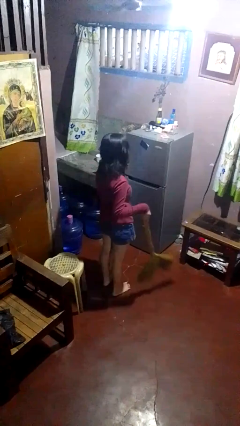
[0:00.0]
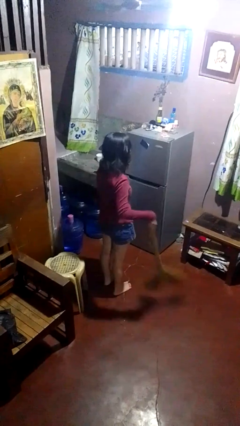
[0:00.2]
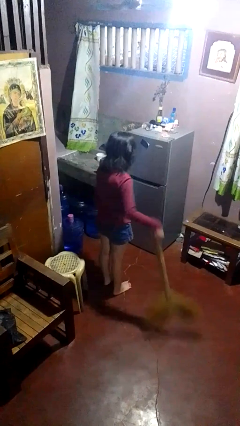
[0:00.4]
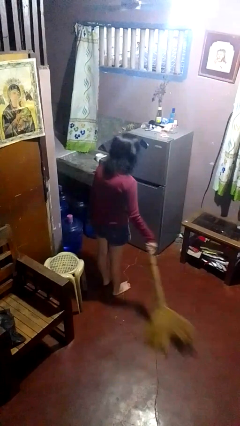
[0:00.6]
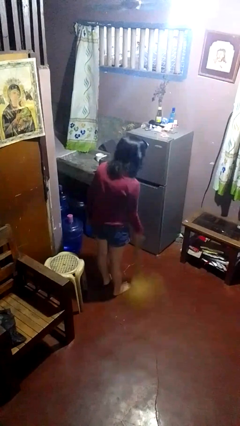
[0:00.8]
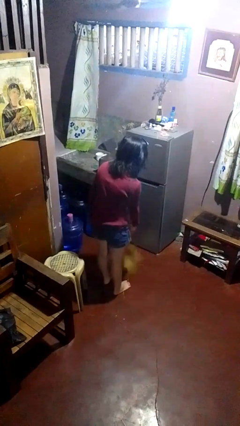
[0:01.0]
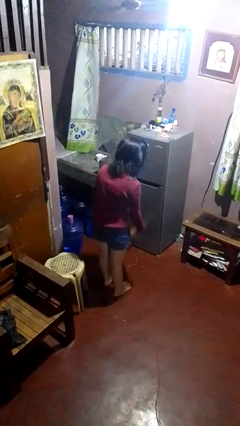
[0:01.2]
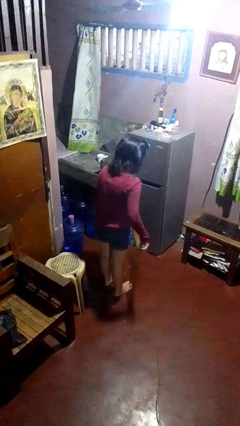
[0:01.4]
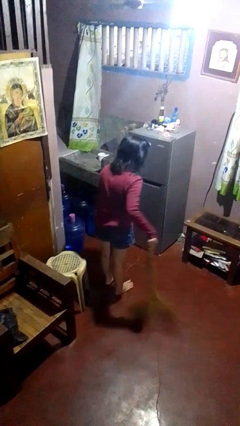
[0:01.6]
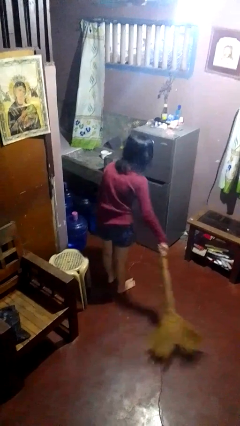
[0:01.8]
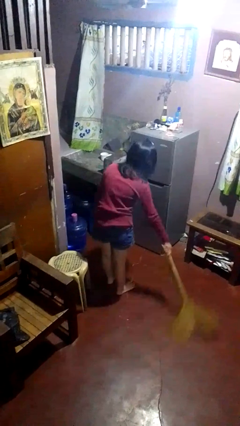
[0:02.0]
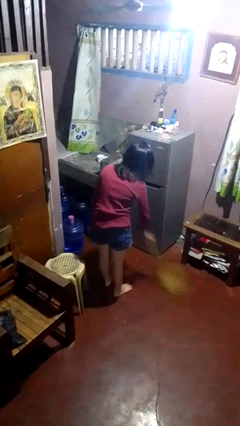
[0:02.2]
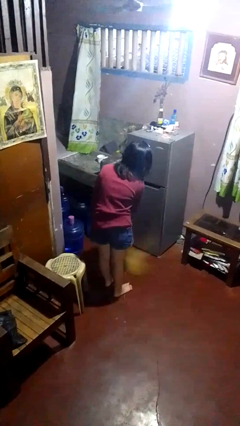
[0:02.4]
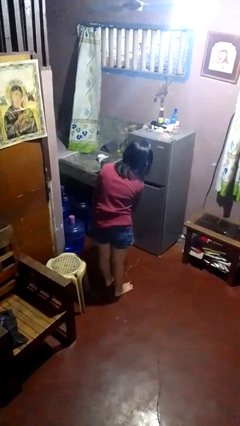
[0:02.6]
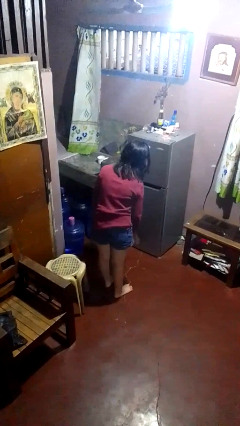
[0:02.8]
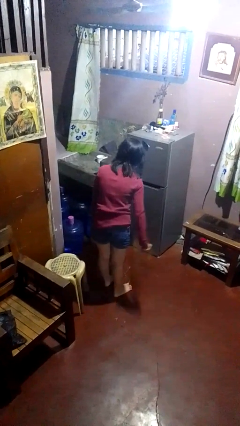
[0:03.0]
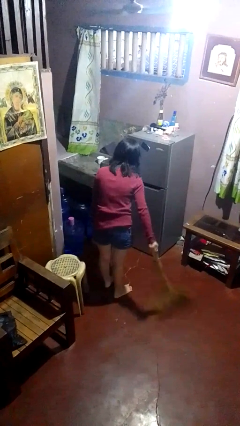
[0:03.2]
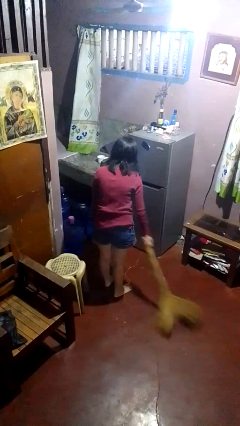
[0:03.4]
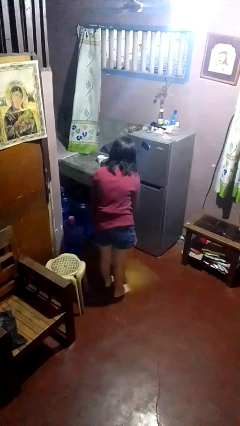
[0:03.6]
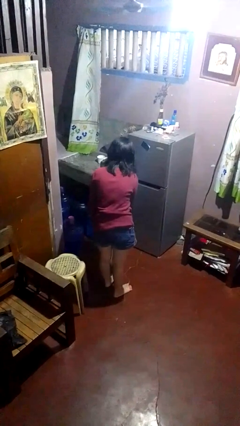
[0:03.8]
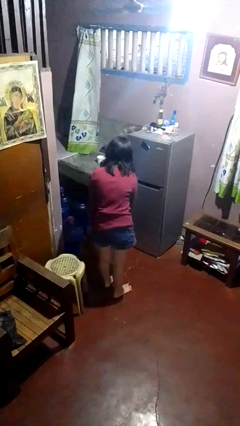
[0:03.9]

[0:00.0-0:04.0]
person sweeps floor

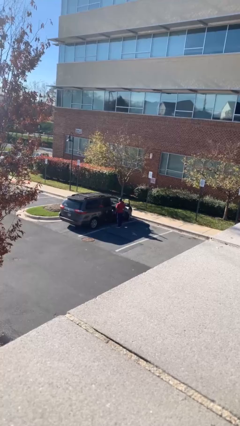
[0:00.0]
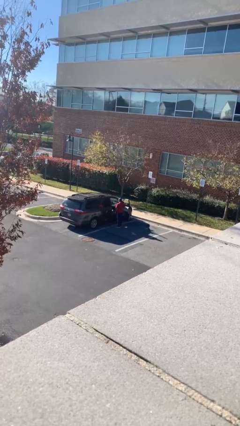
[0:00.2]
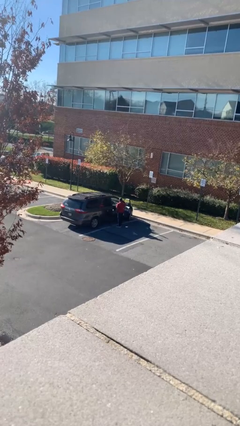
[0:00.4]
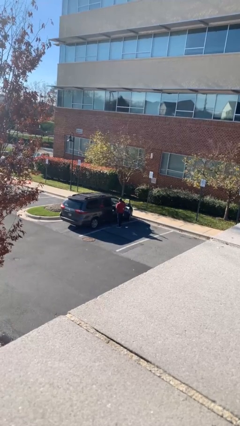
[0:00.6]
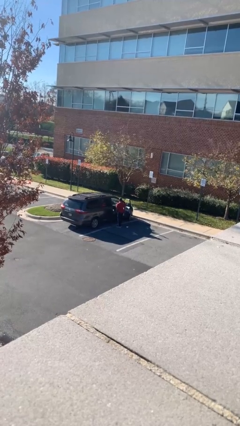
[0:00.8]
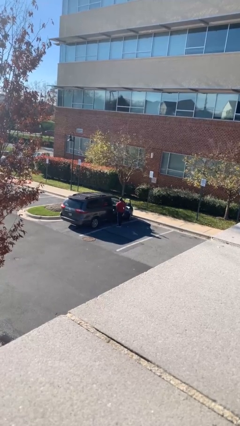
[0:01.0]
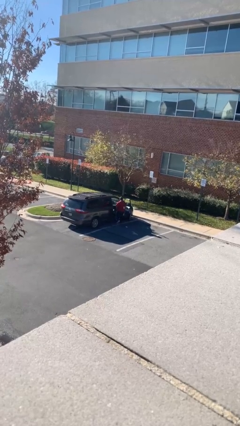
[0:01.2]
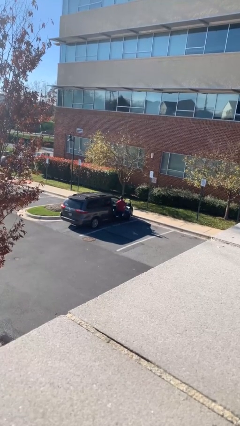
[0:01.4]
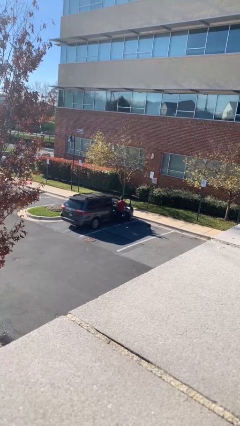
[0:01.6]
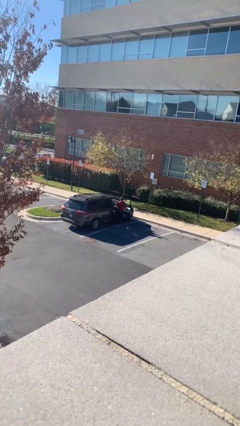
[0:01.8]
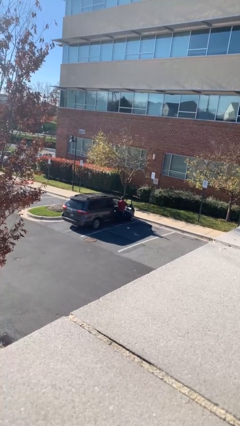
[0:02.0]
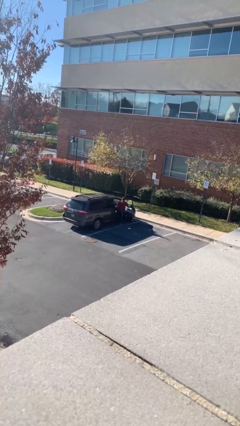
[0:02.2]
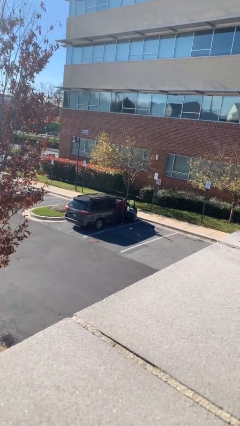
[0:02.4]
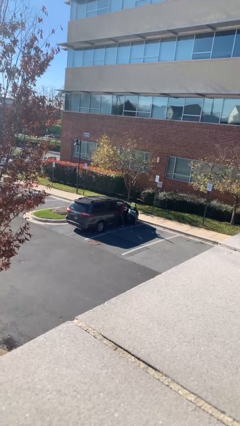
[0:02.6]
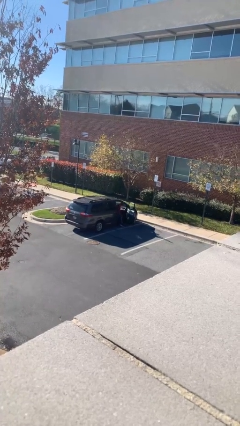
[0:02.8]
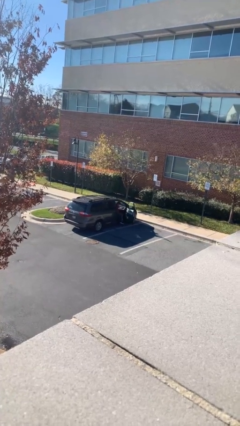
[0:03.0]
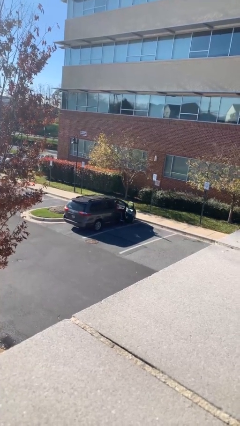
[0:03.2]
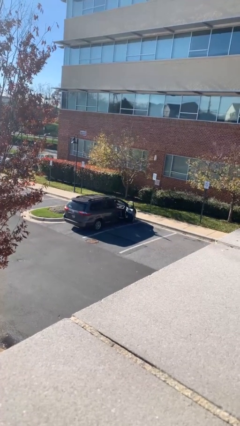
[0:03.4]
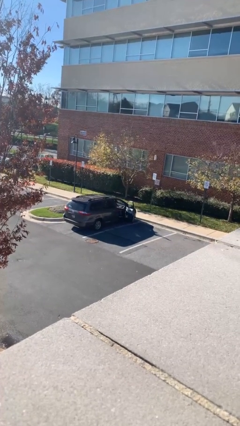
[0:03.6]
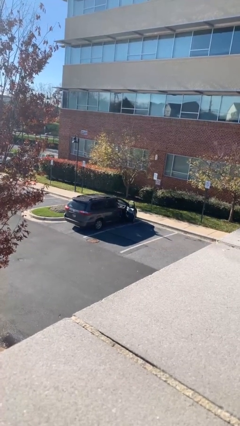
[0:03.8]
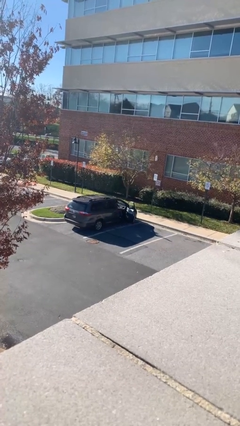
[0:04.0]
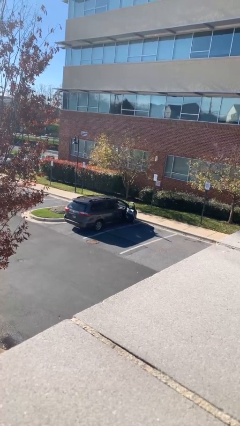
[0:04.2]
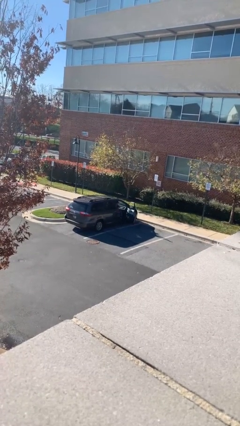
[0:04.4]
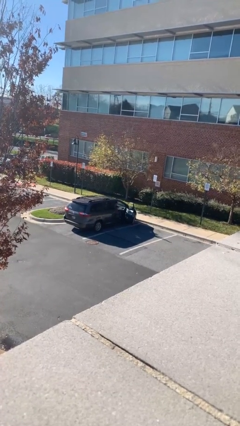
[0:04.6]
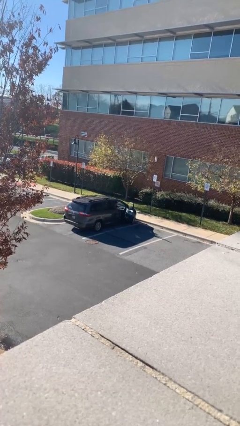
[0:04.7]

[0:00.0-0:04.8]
person enters car

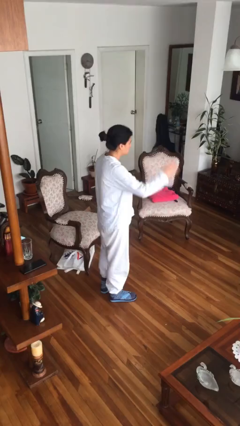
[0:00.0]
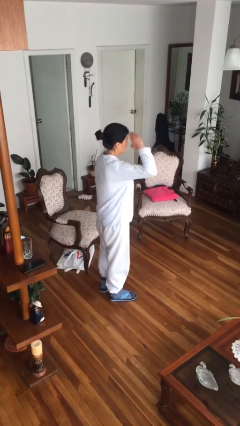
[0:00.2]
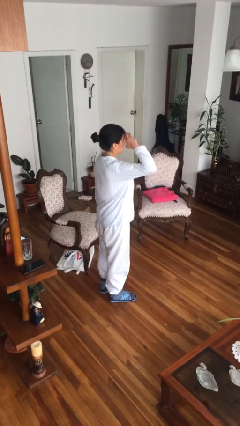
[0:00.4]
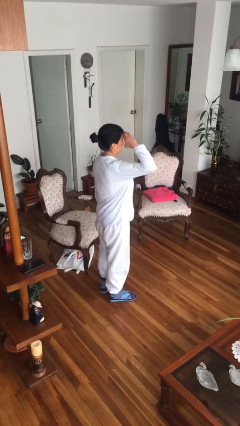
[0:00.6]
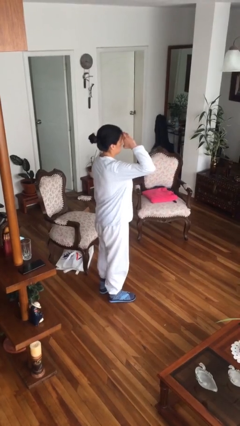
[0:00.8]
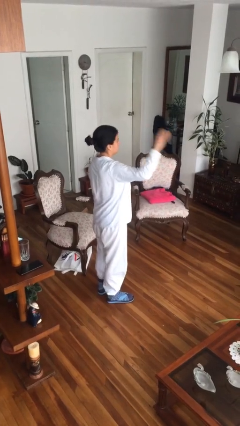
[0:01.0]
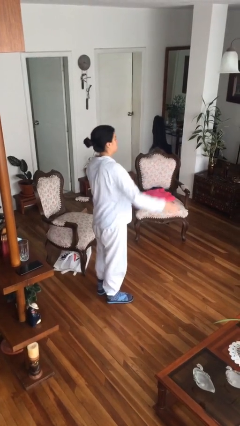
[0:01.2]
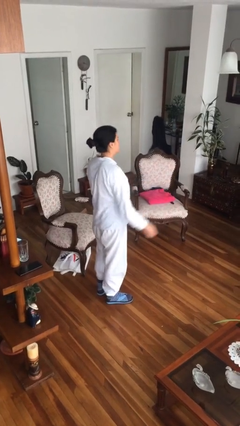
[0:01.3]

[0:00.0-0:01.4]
person salutes

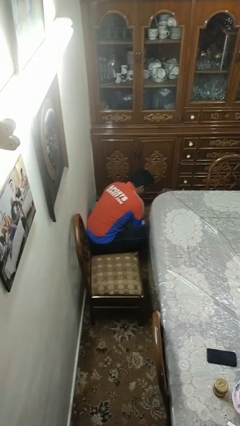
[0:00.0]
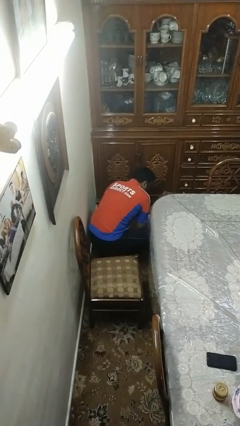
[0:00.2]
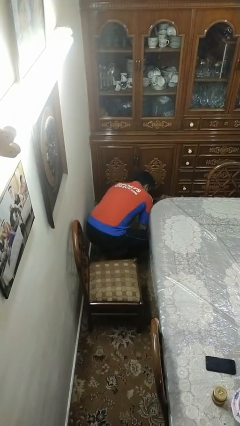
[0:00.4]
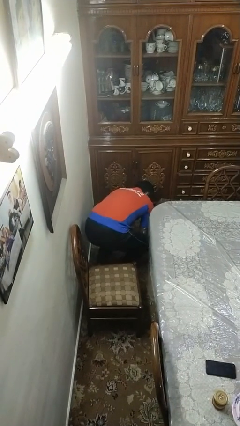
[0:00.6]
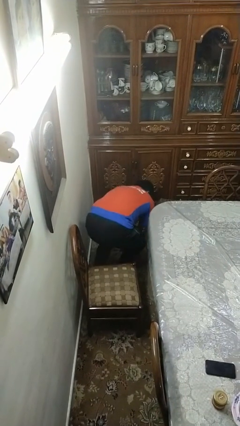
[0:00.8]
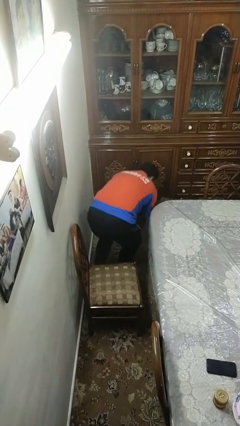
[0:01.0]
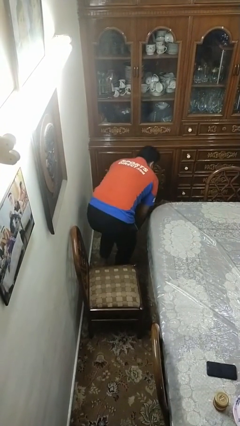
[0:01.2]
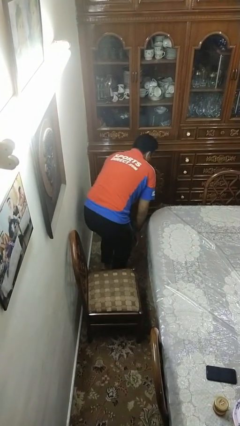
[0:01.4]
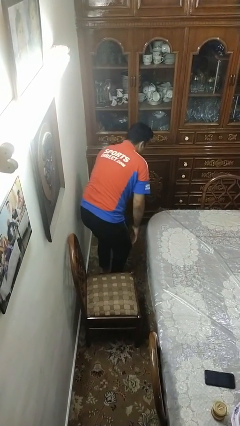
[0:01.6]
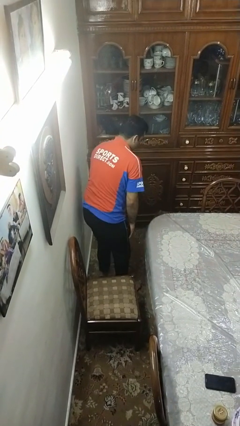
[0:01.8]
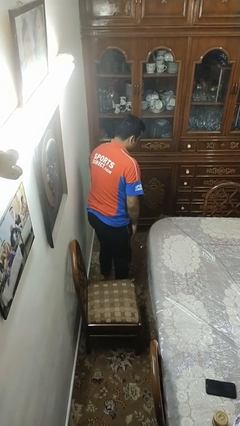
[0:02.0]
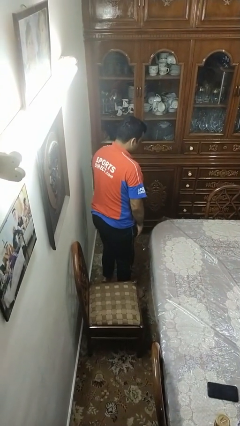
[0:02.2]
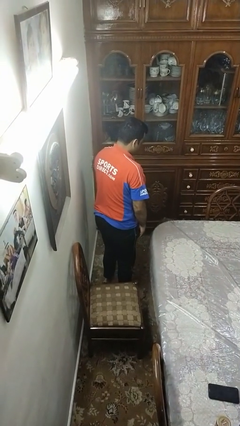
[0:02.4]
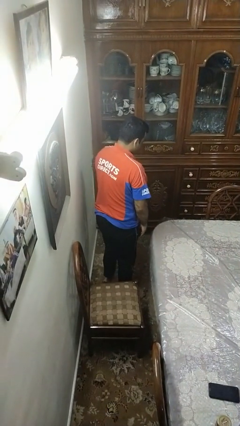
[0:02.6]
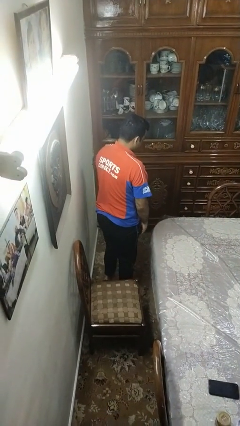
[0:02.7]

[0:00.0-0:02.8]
person stands up from floor

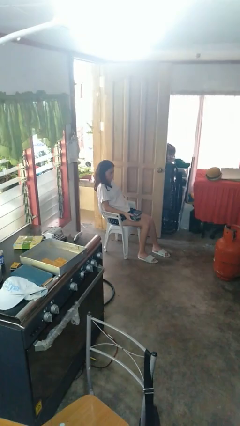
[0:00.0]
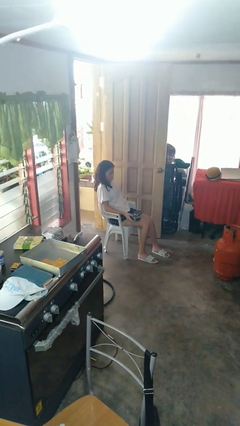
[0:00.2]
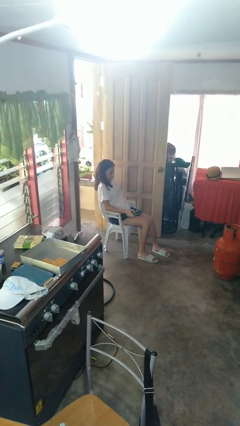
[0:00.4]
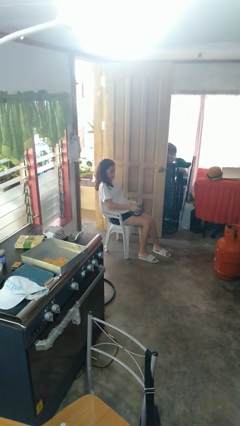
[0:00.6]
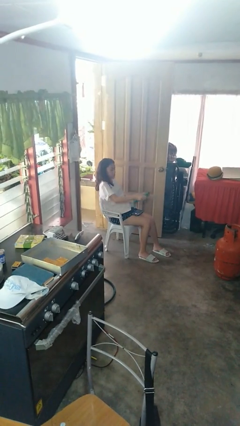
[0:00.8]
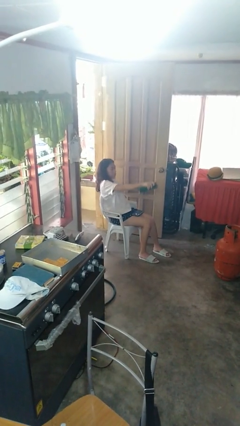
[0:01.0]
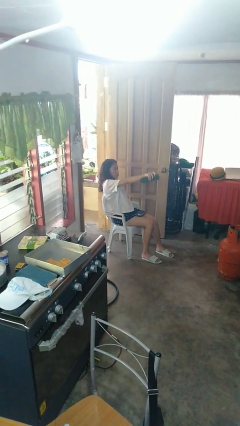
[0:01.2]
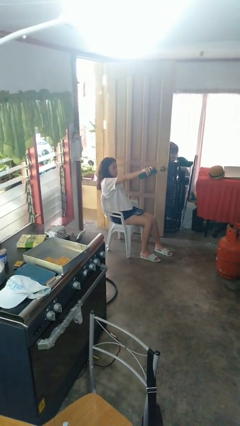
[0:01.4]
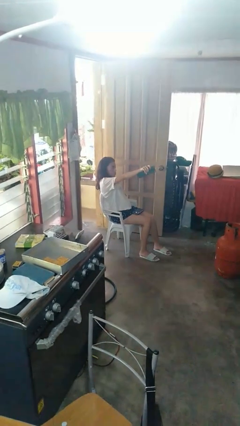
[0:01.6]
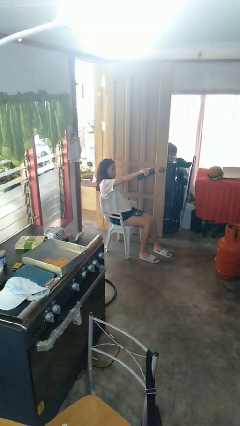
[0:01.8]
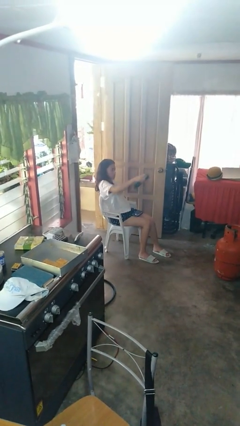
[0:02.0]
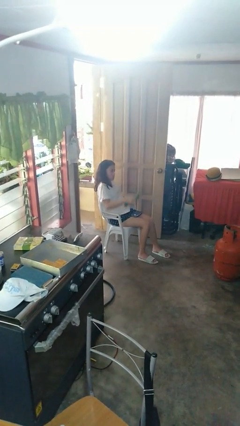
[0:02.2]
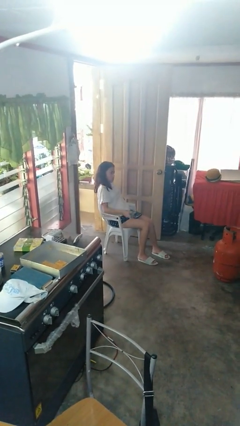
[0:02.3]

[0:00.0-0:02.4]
person uses television remote

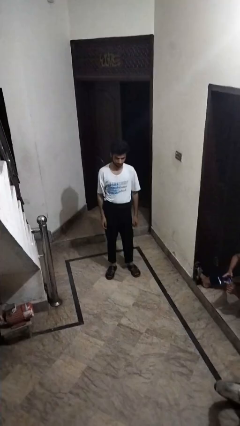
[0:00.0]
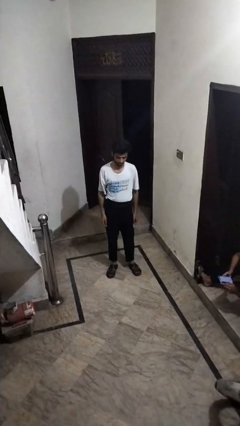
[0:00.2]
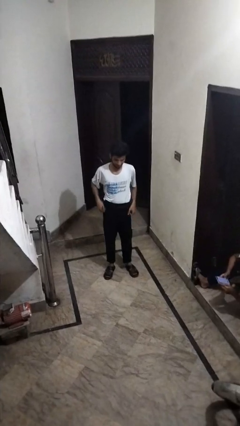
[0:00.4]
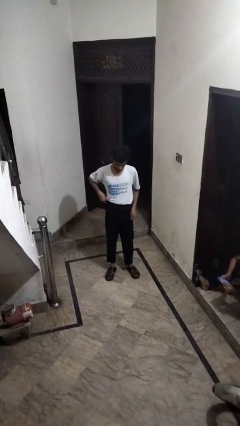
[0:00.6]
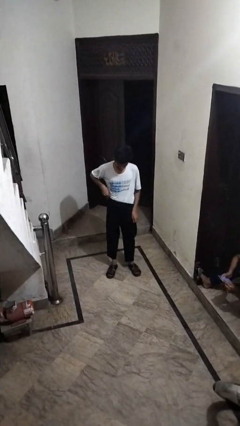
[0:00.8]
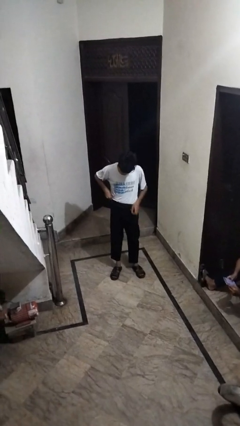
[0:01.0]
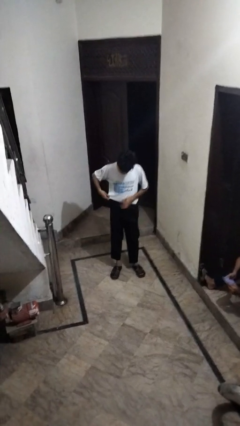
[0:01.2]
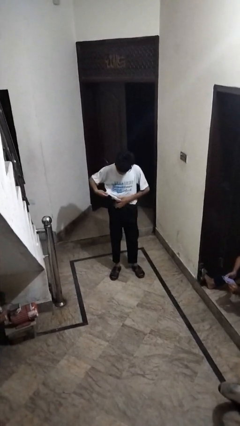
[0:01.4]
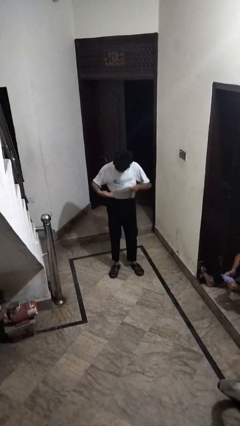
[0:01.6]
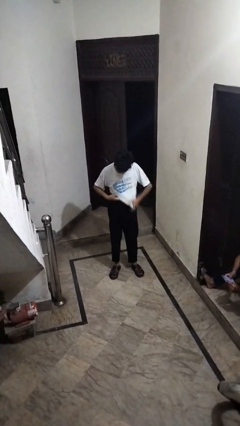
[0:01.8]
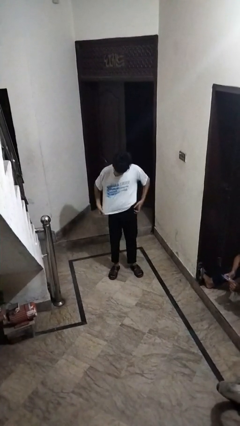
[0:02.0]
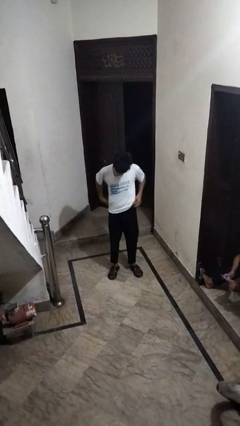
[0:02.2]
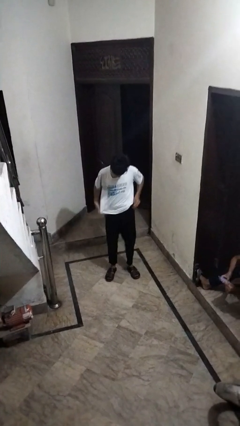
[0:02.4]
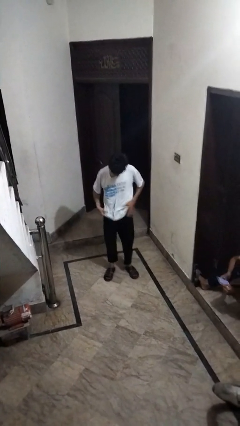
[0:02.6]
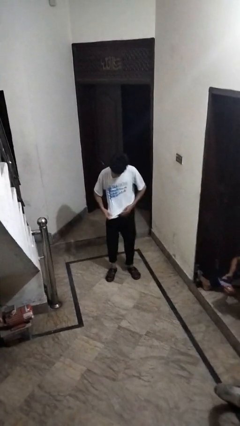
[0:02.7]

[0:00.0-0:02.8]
person untucks shirt
